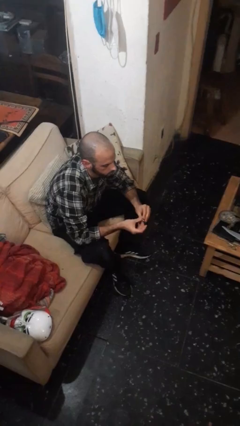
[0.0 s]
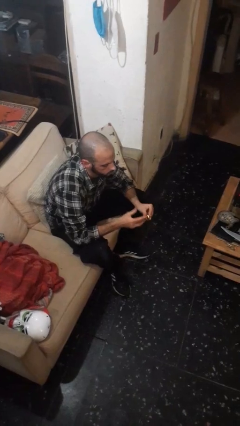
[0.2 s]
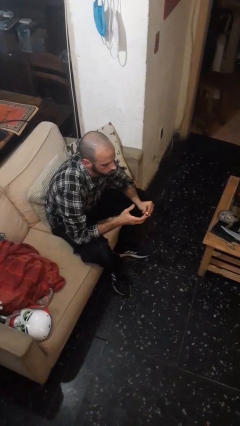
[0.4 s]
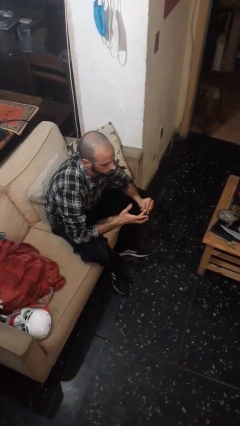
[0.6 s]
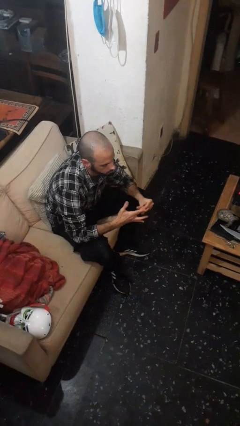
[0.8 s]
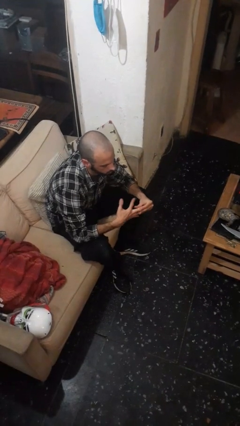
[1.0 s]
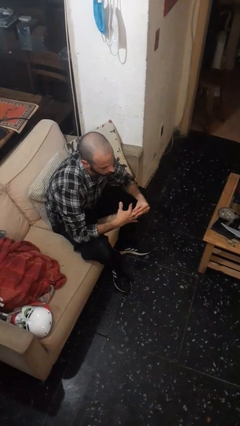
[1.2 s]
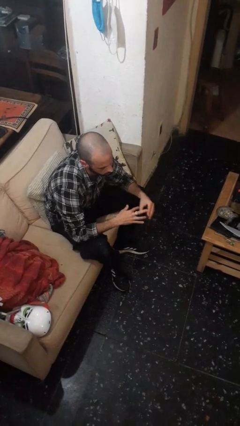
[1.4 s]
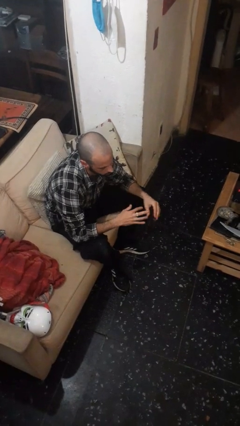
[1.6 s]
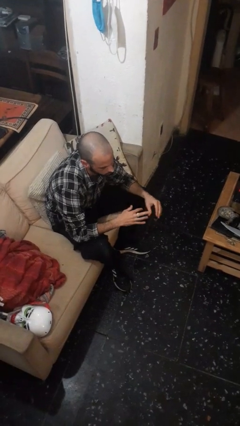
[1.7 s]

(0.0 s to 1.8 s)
person puts on ring

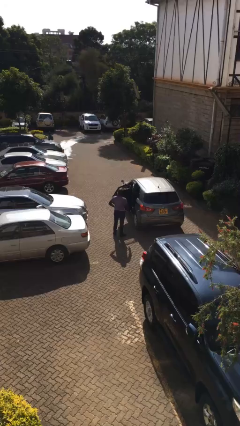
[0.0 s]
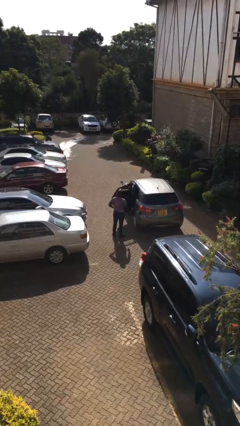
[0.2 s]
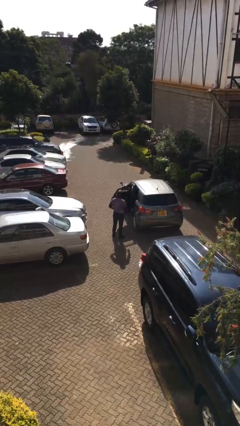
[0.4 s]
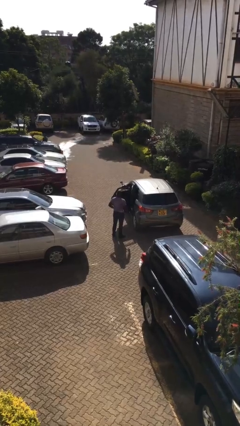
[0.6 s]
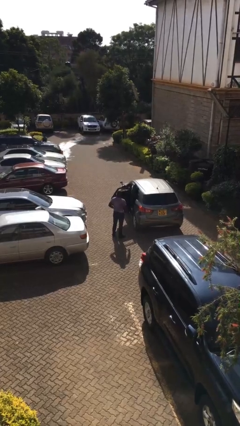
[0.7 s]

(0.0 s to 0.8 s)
person enters car

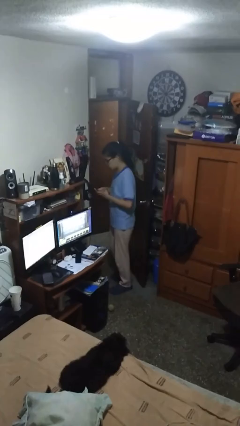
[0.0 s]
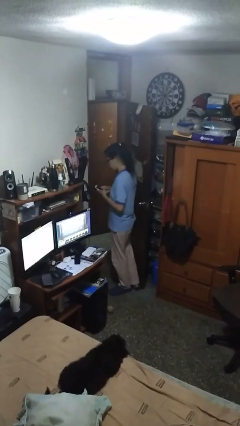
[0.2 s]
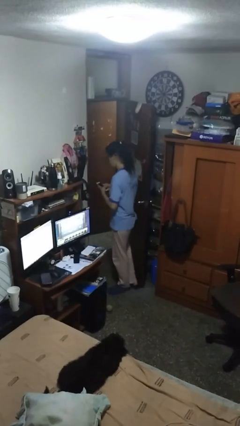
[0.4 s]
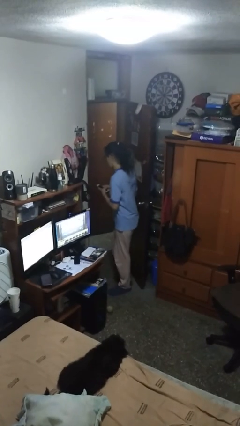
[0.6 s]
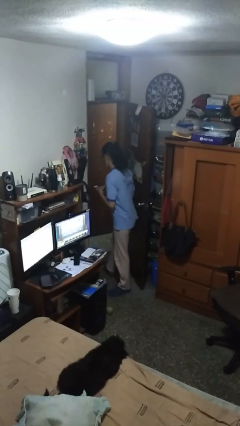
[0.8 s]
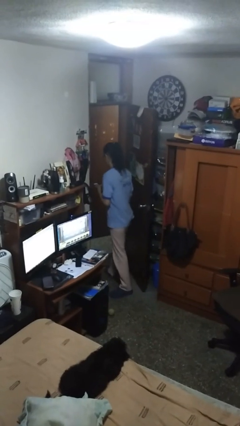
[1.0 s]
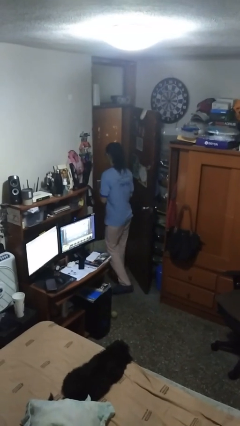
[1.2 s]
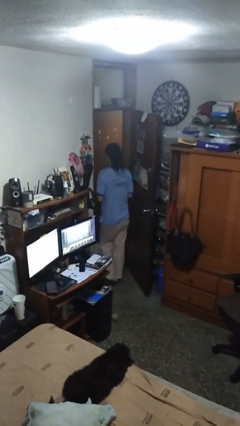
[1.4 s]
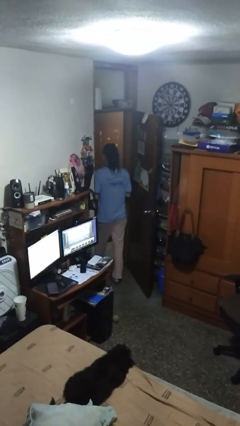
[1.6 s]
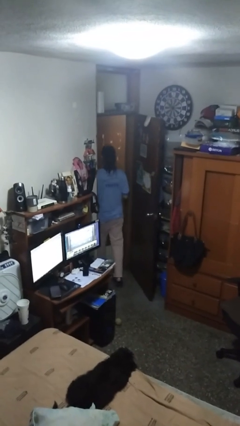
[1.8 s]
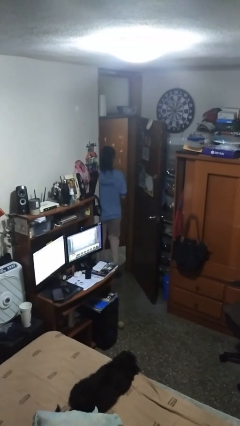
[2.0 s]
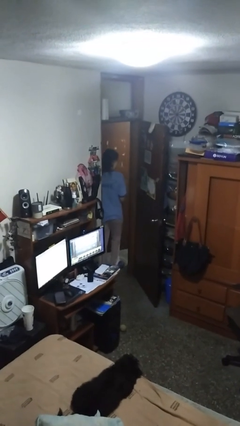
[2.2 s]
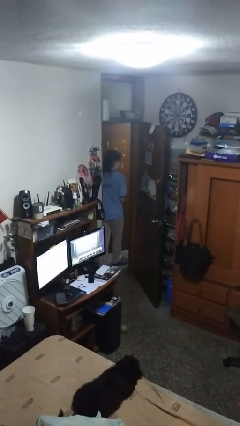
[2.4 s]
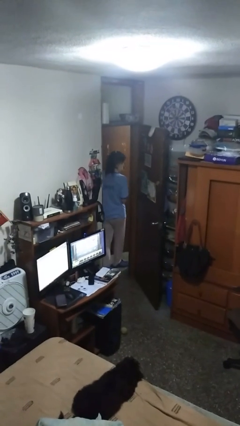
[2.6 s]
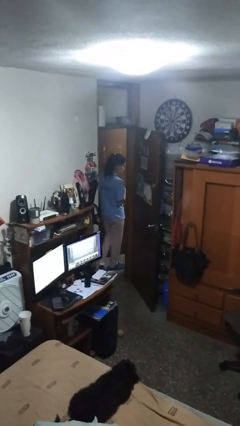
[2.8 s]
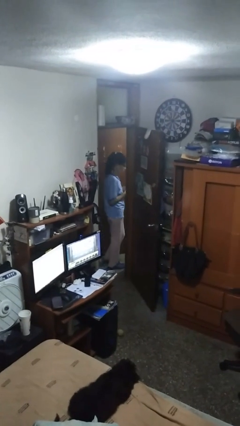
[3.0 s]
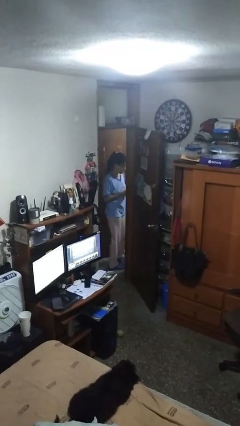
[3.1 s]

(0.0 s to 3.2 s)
person exits scene through structure

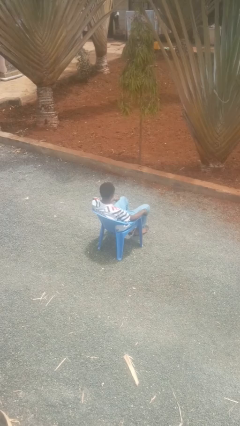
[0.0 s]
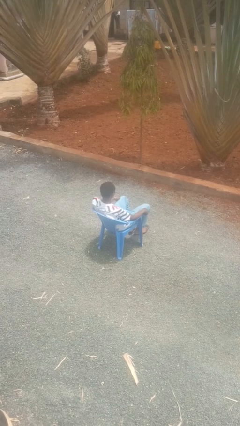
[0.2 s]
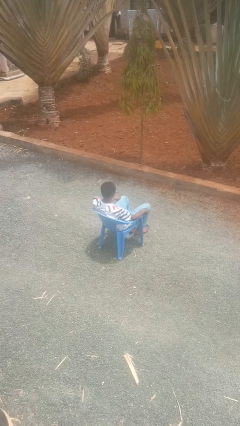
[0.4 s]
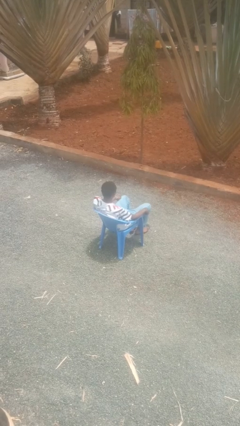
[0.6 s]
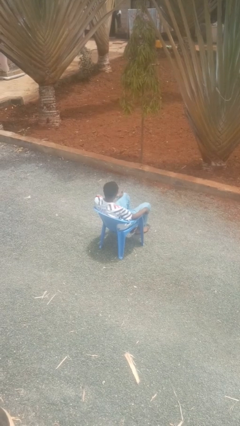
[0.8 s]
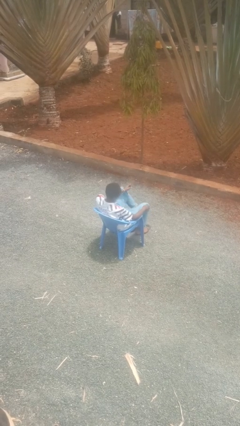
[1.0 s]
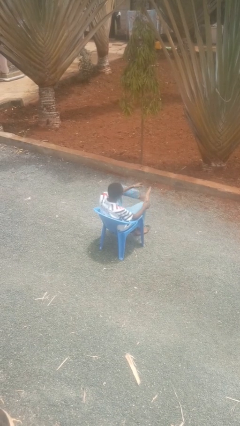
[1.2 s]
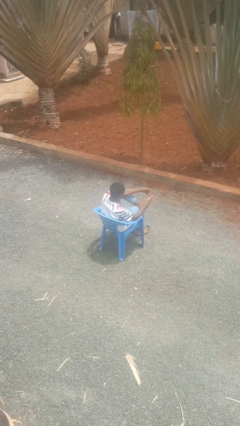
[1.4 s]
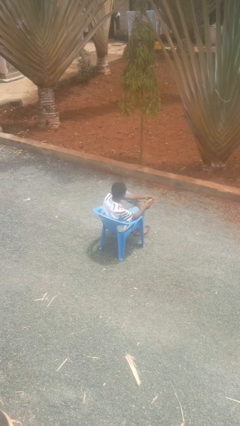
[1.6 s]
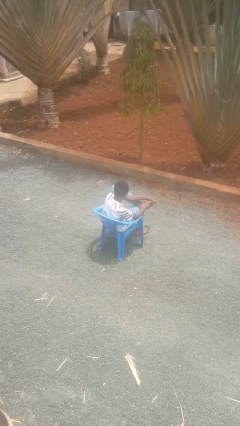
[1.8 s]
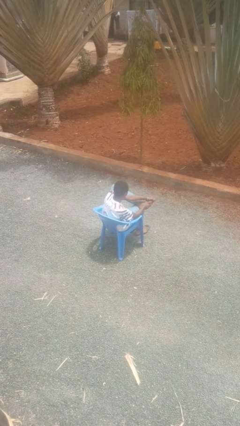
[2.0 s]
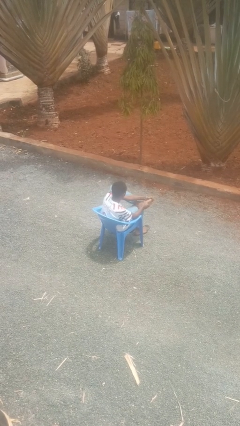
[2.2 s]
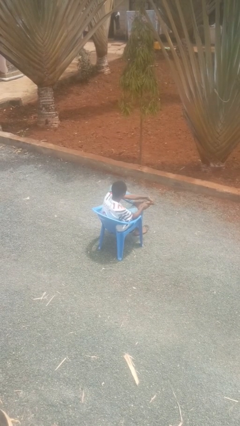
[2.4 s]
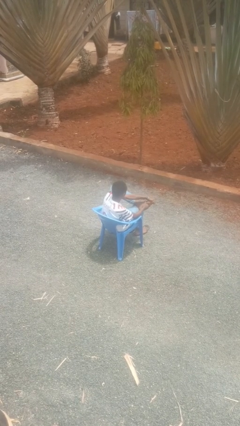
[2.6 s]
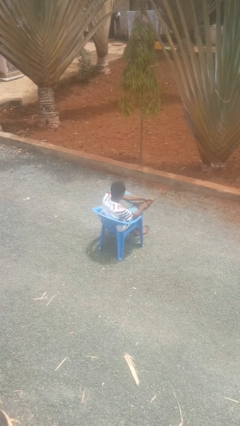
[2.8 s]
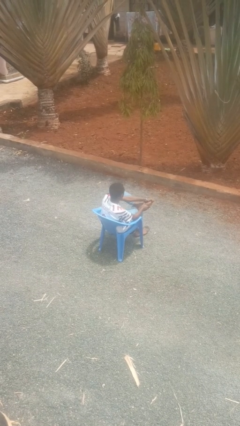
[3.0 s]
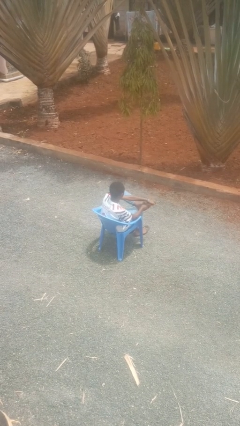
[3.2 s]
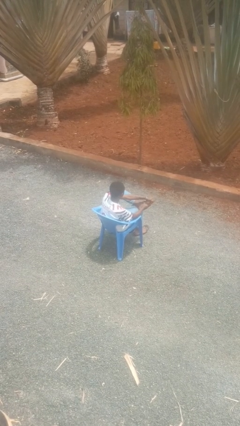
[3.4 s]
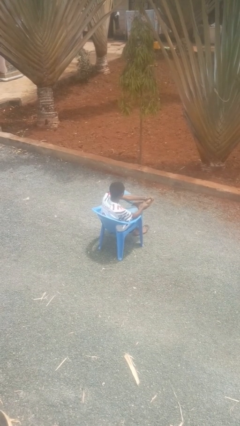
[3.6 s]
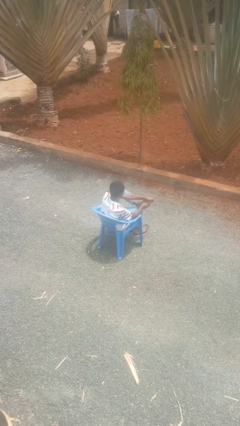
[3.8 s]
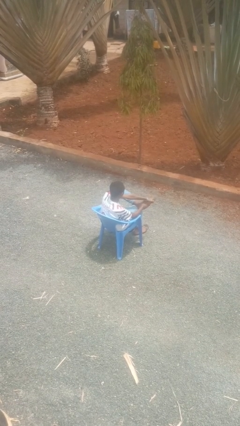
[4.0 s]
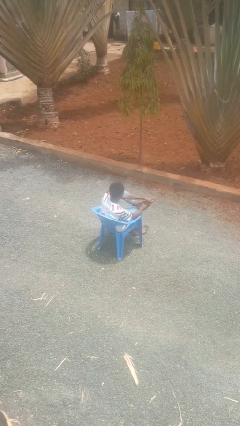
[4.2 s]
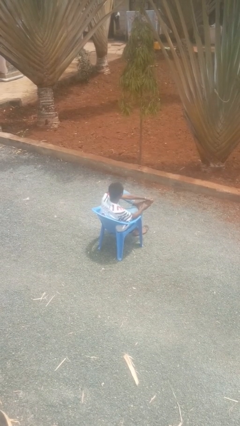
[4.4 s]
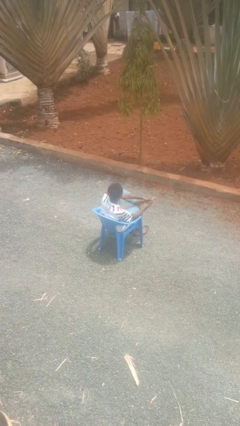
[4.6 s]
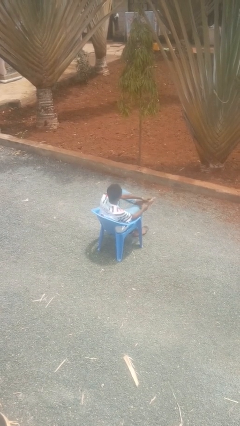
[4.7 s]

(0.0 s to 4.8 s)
person rubs foot

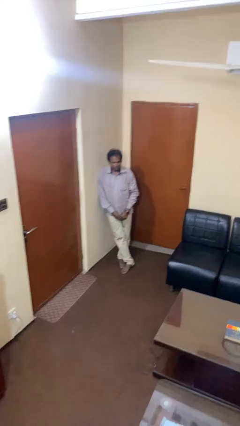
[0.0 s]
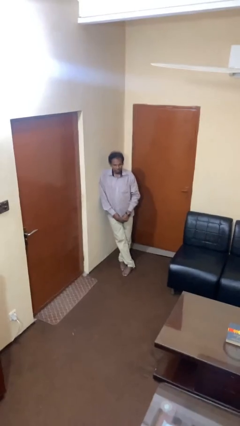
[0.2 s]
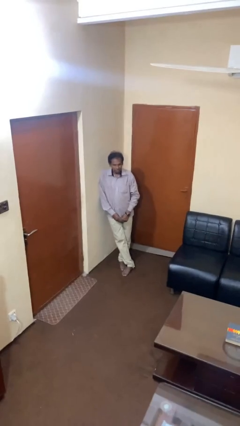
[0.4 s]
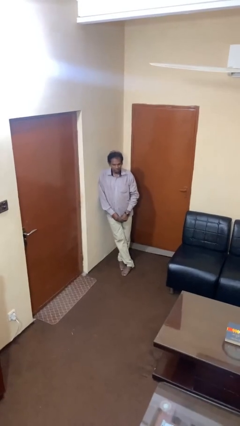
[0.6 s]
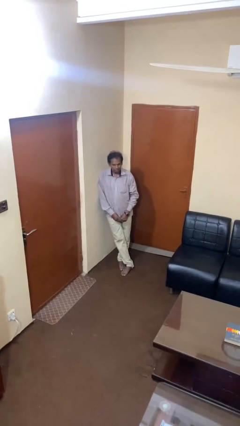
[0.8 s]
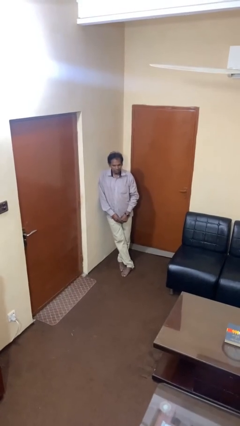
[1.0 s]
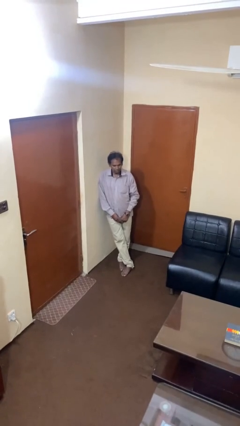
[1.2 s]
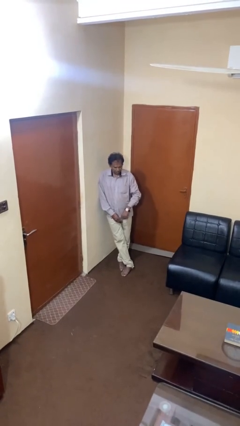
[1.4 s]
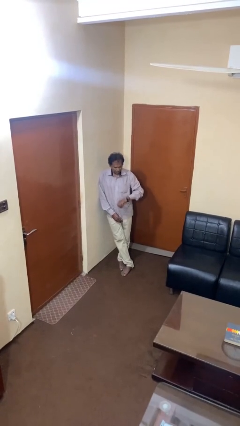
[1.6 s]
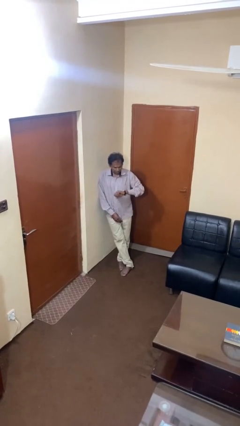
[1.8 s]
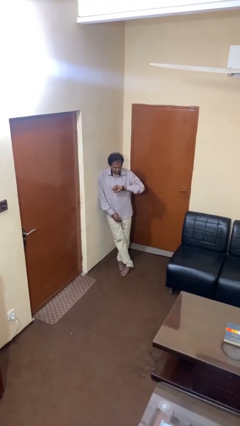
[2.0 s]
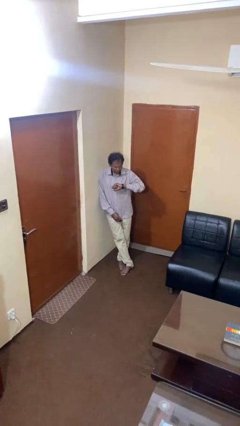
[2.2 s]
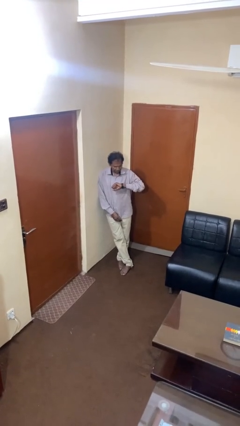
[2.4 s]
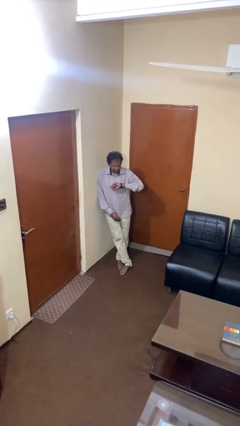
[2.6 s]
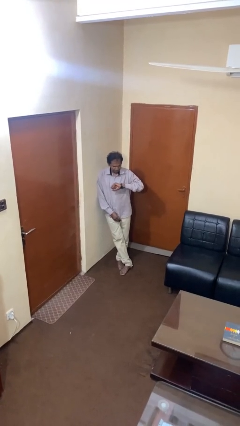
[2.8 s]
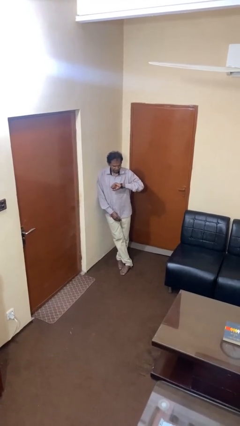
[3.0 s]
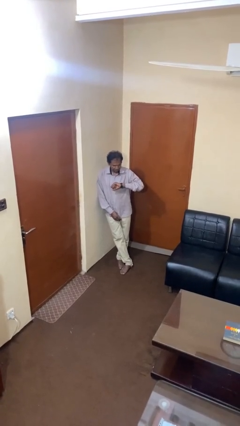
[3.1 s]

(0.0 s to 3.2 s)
person looks at wristwatch

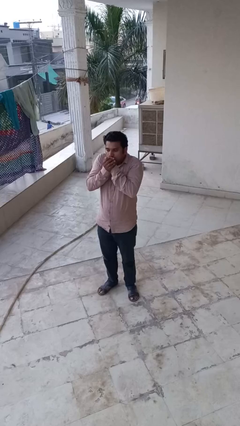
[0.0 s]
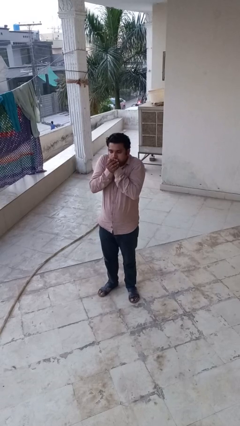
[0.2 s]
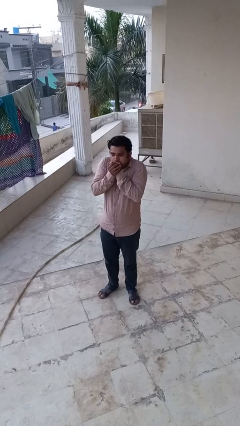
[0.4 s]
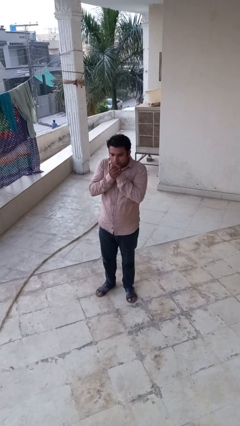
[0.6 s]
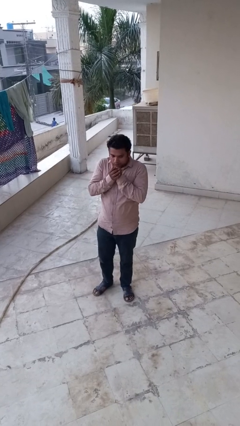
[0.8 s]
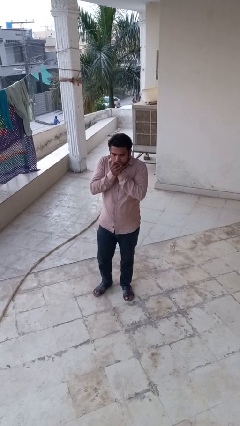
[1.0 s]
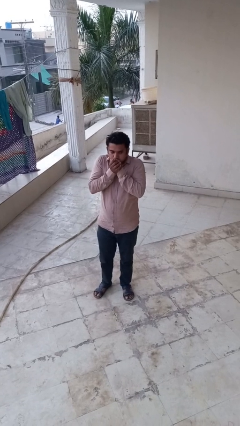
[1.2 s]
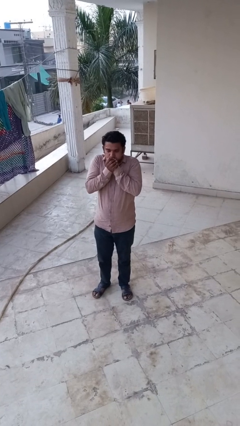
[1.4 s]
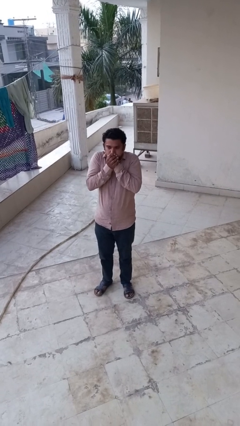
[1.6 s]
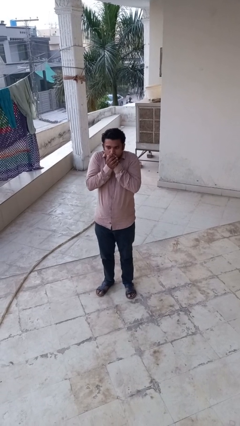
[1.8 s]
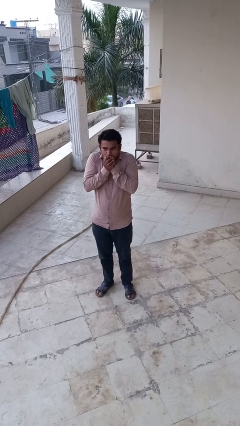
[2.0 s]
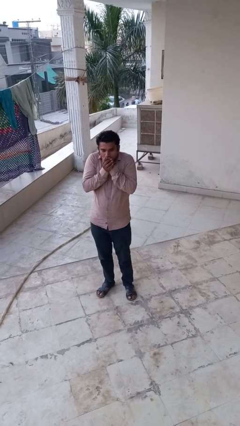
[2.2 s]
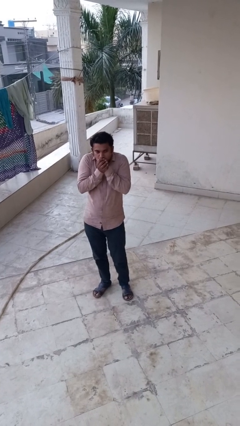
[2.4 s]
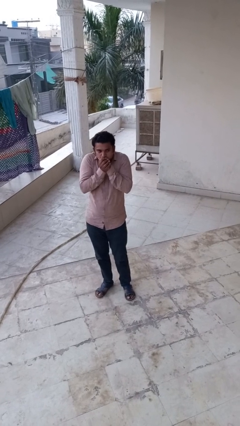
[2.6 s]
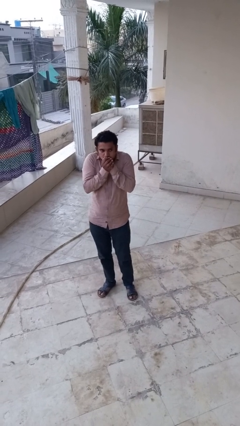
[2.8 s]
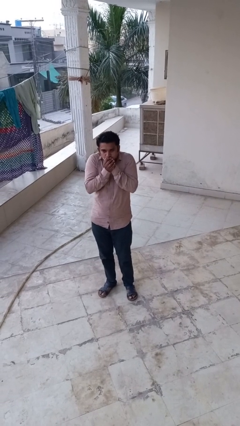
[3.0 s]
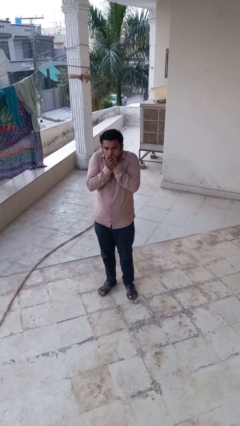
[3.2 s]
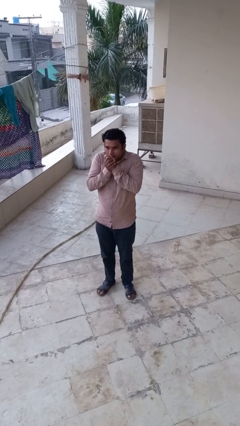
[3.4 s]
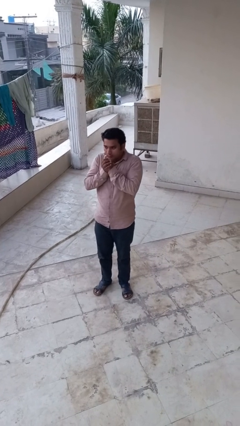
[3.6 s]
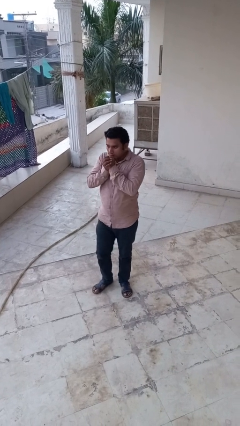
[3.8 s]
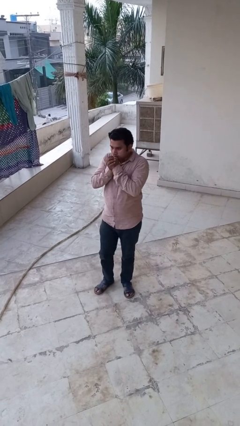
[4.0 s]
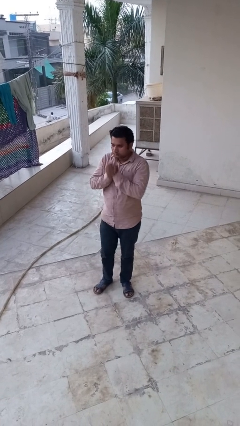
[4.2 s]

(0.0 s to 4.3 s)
person blows into hands
